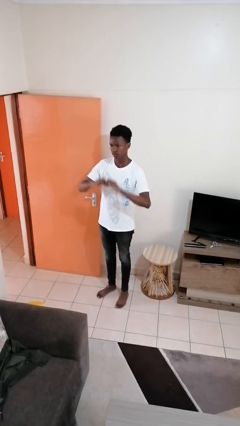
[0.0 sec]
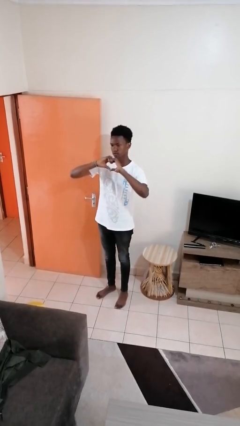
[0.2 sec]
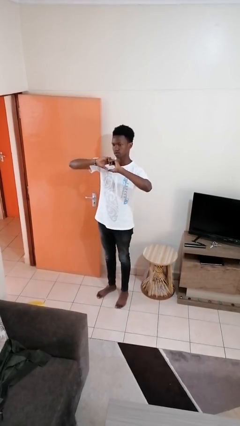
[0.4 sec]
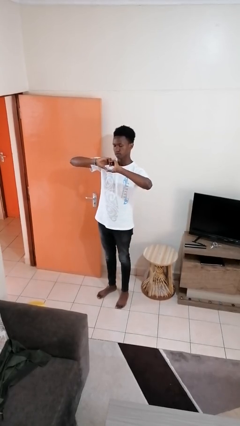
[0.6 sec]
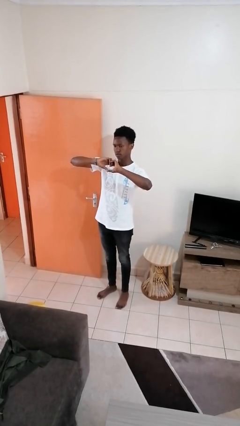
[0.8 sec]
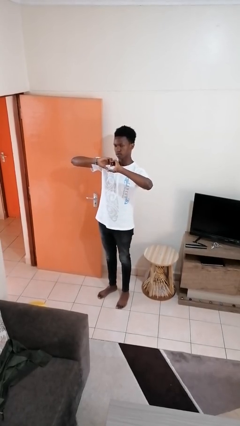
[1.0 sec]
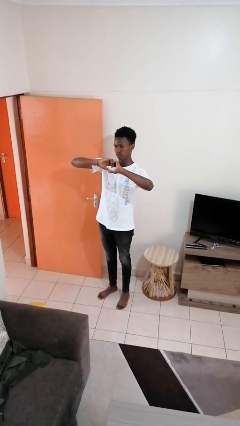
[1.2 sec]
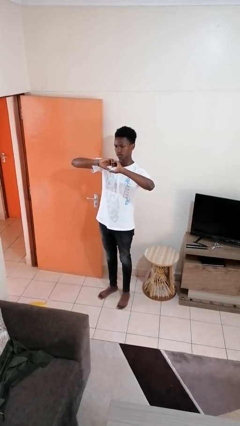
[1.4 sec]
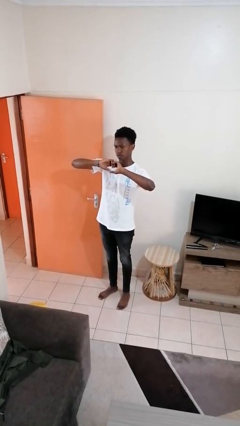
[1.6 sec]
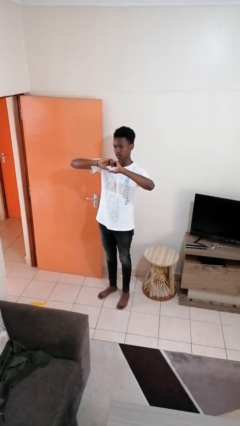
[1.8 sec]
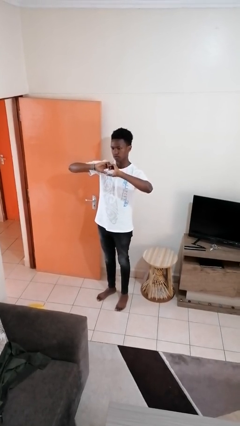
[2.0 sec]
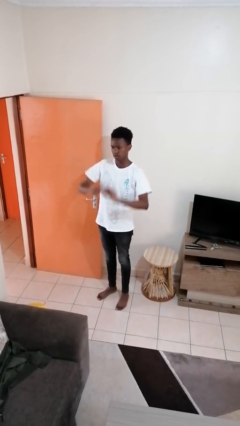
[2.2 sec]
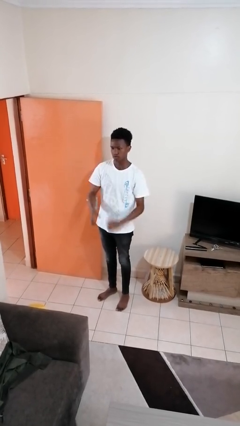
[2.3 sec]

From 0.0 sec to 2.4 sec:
person gestures heart

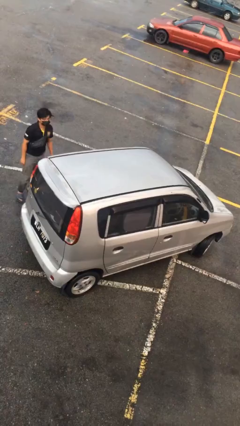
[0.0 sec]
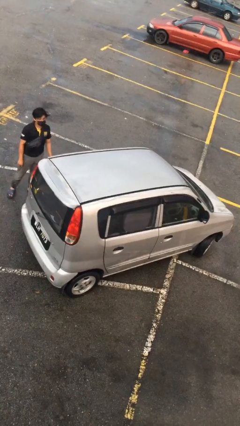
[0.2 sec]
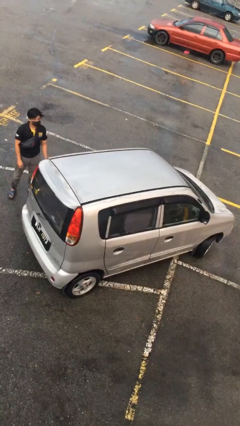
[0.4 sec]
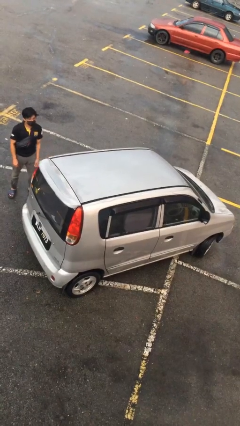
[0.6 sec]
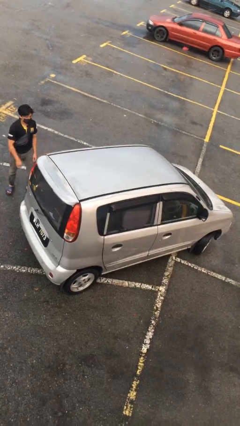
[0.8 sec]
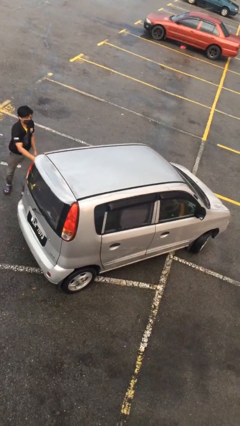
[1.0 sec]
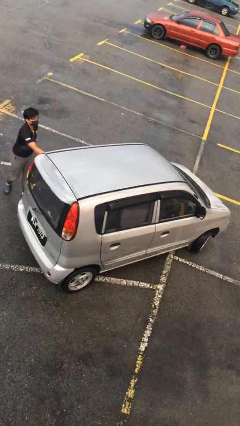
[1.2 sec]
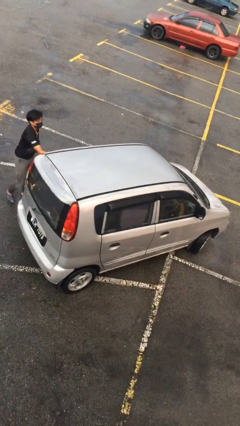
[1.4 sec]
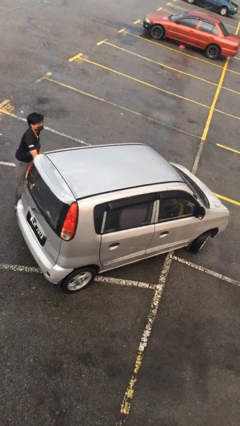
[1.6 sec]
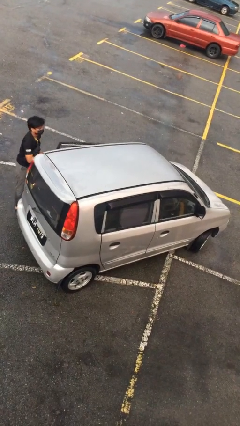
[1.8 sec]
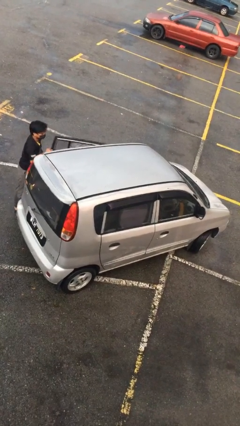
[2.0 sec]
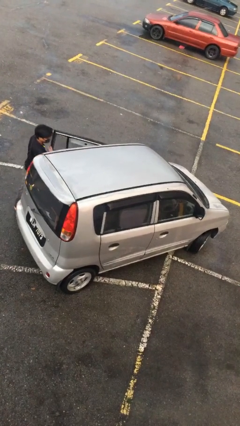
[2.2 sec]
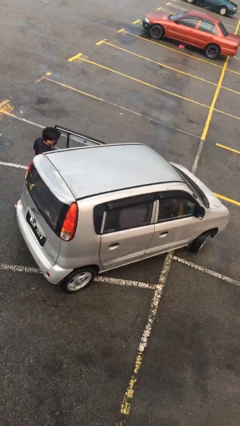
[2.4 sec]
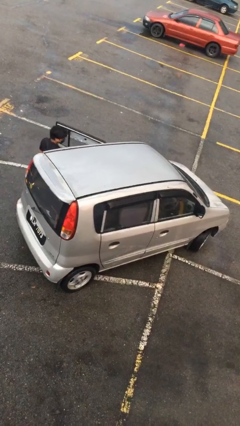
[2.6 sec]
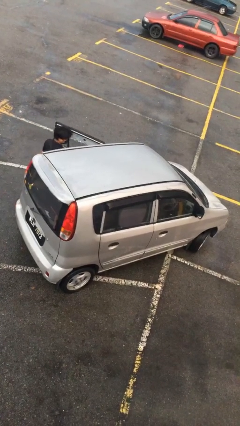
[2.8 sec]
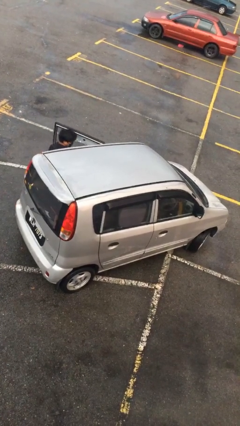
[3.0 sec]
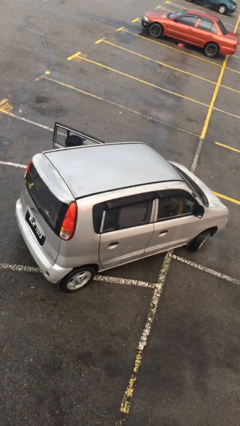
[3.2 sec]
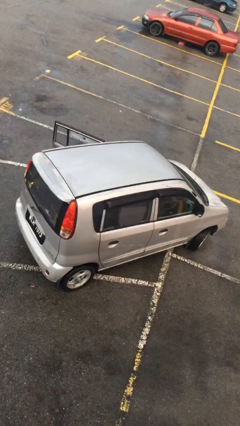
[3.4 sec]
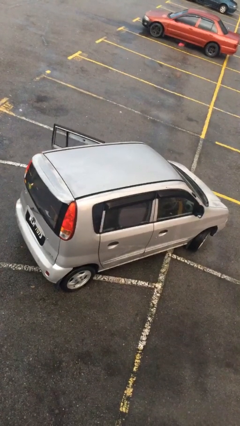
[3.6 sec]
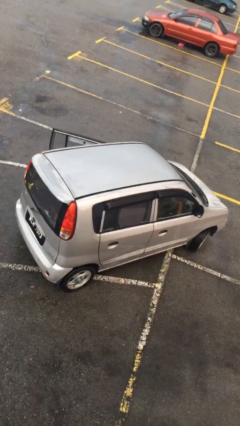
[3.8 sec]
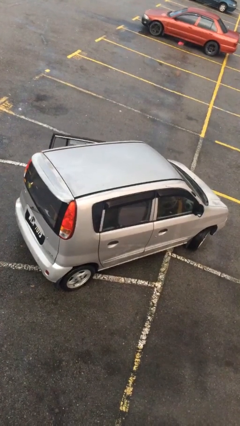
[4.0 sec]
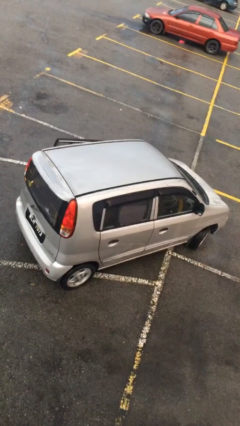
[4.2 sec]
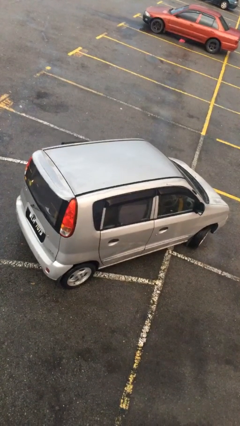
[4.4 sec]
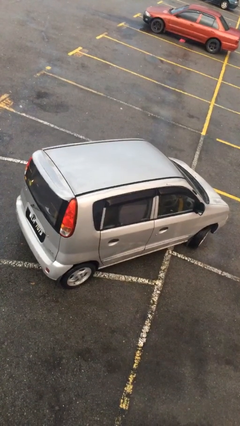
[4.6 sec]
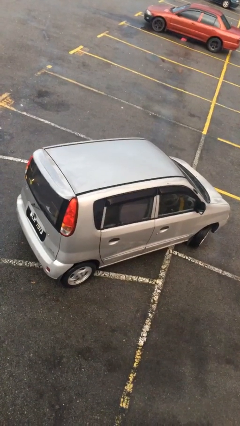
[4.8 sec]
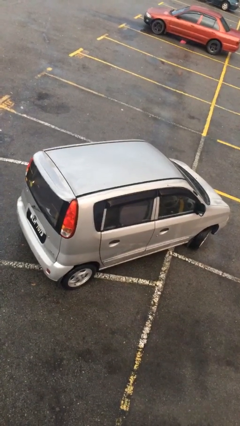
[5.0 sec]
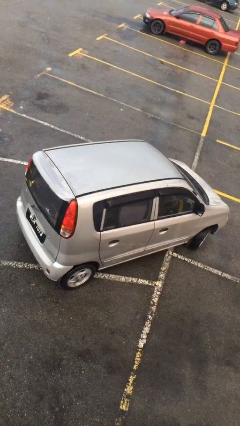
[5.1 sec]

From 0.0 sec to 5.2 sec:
car picks up person

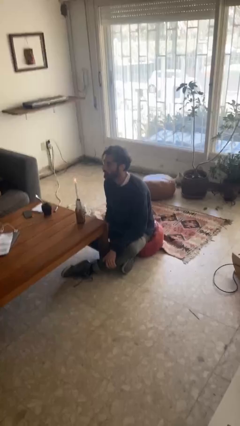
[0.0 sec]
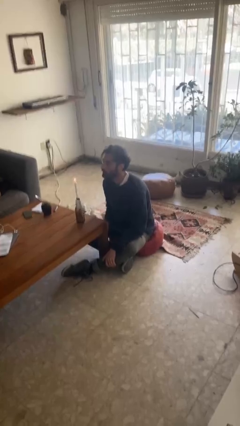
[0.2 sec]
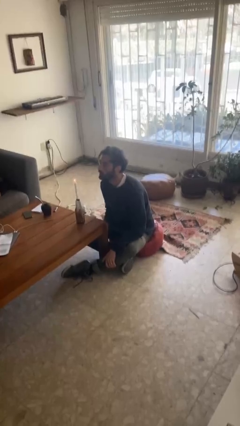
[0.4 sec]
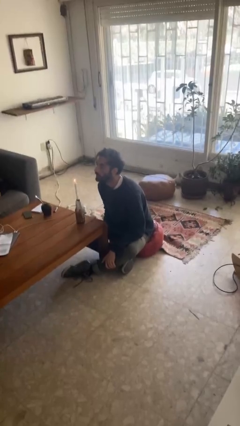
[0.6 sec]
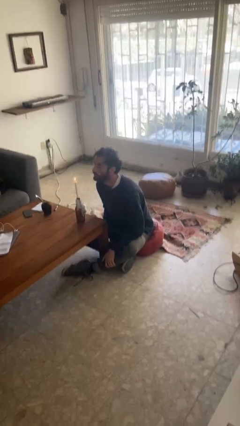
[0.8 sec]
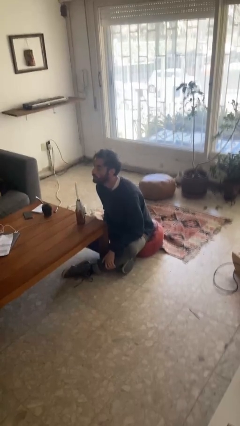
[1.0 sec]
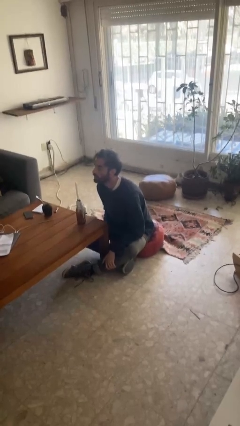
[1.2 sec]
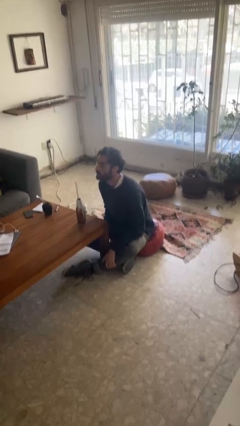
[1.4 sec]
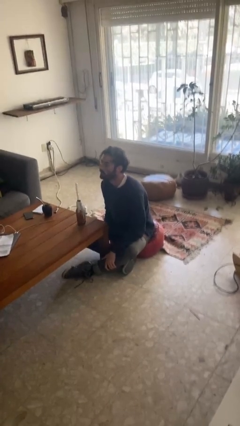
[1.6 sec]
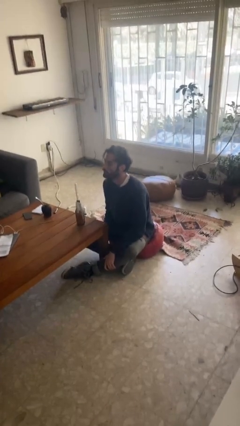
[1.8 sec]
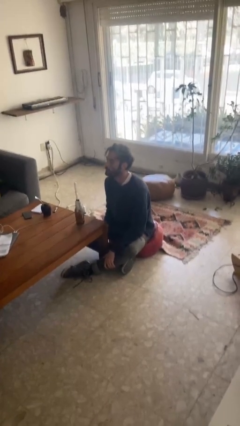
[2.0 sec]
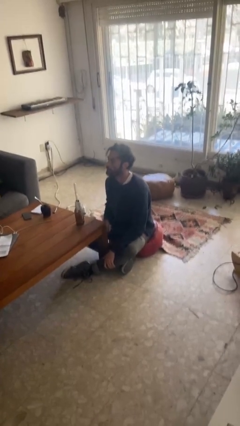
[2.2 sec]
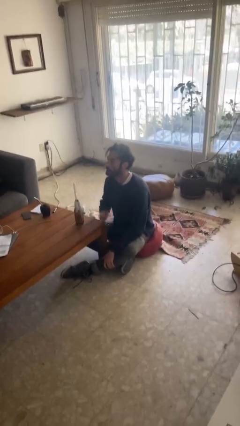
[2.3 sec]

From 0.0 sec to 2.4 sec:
person extinguishes candle

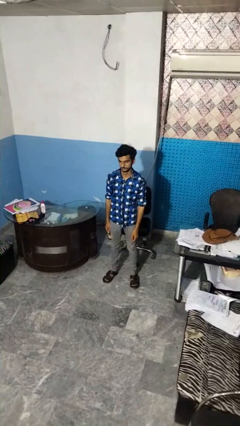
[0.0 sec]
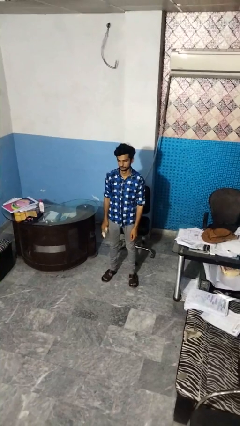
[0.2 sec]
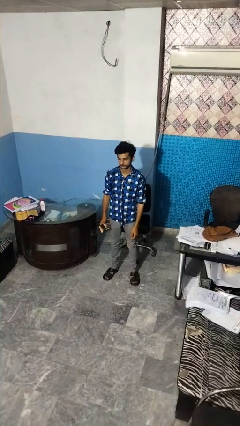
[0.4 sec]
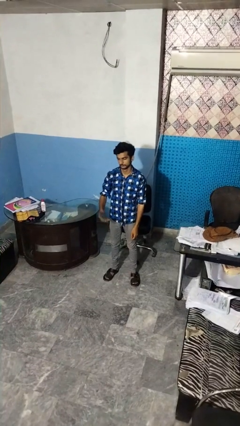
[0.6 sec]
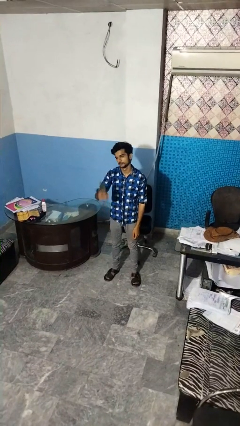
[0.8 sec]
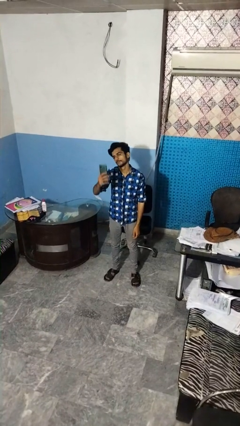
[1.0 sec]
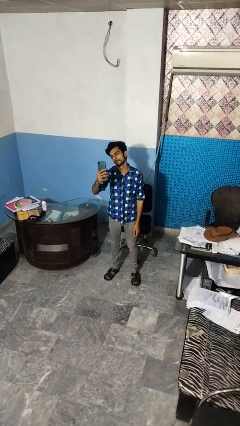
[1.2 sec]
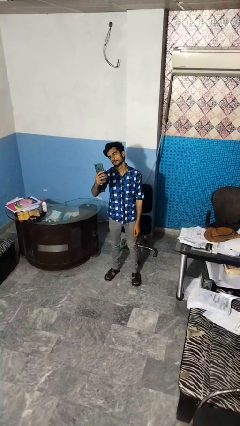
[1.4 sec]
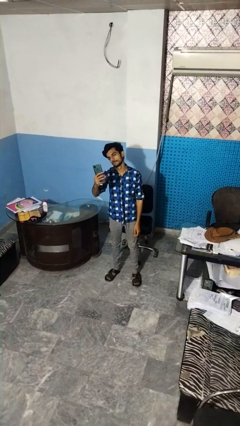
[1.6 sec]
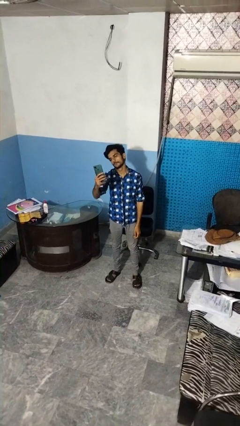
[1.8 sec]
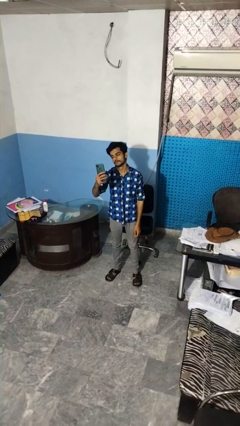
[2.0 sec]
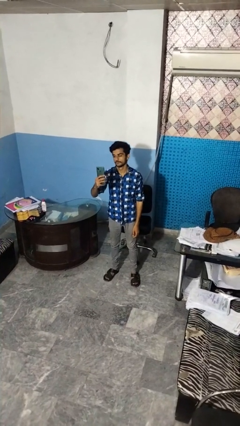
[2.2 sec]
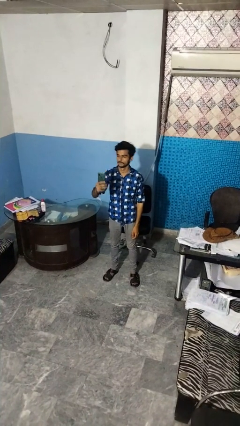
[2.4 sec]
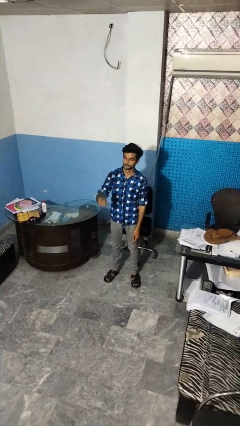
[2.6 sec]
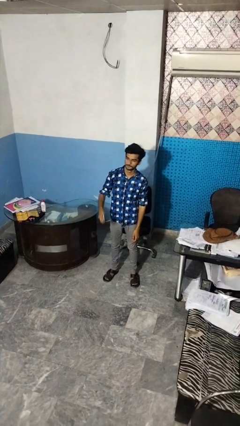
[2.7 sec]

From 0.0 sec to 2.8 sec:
person takes selfie

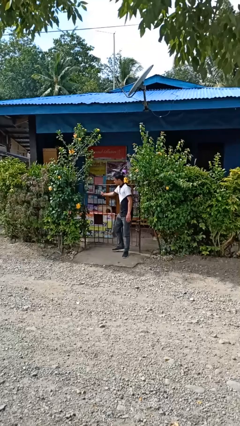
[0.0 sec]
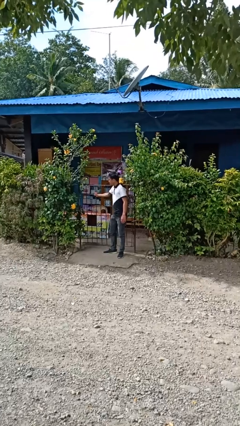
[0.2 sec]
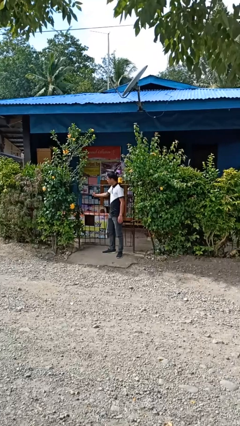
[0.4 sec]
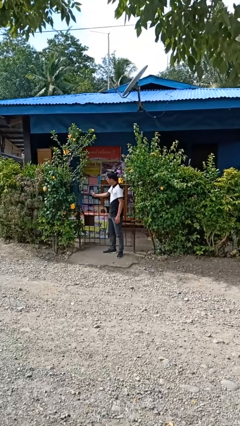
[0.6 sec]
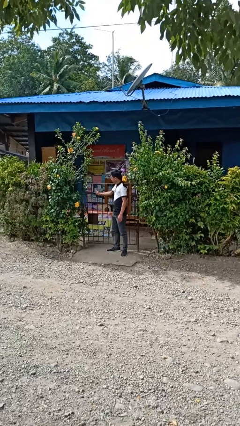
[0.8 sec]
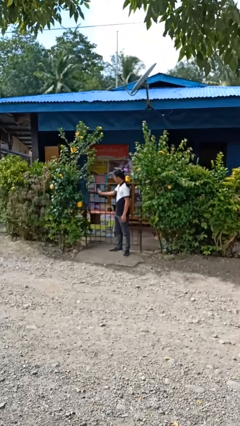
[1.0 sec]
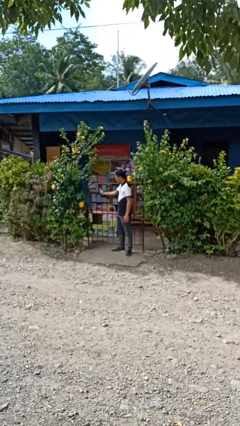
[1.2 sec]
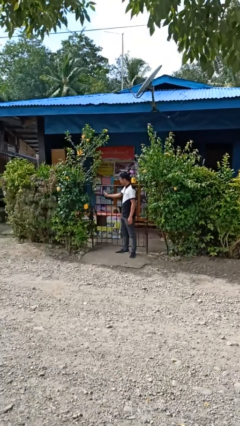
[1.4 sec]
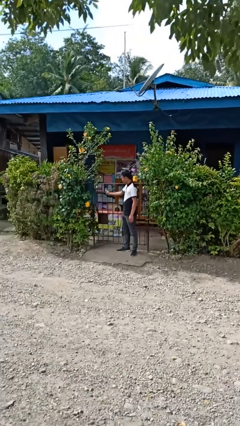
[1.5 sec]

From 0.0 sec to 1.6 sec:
person closes gate

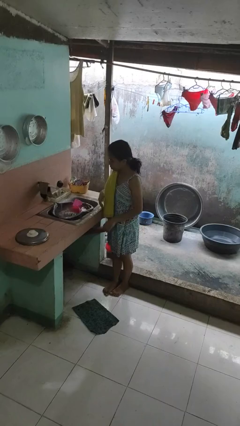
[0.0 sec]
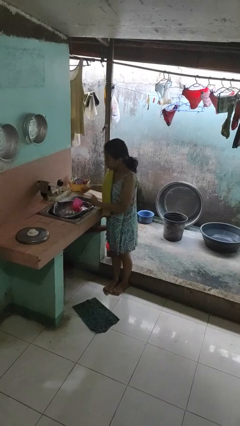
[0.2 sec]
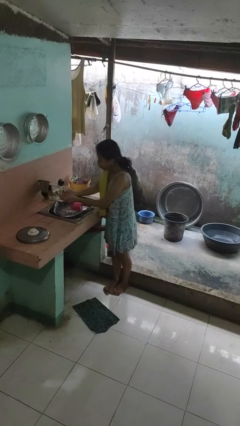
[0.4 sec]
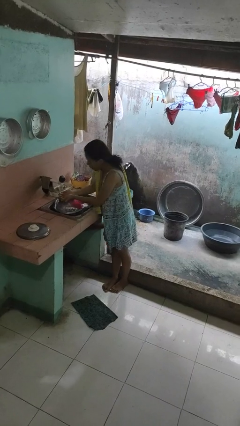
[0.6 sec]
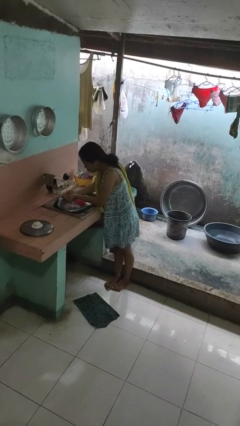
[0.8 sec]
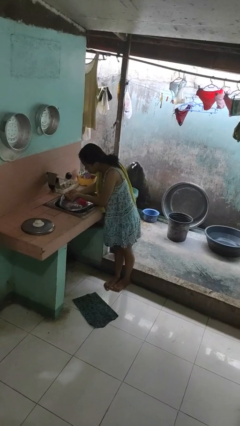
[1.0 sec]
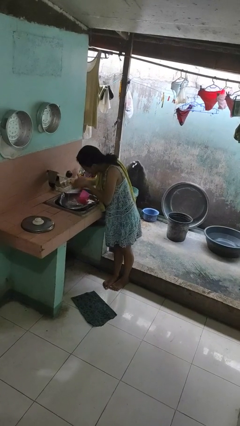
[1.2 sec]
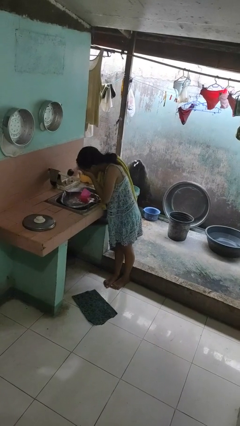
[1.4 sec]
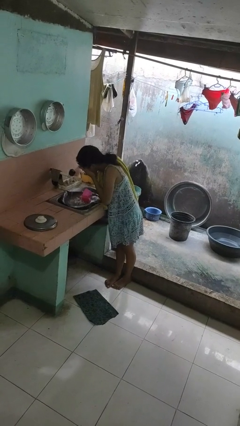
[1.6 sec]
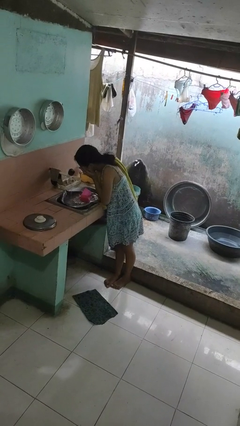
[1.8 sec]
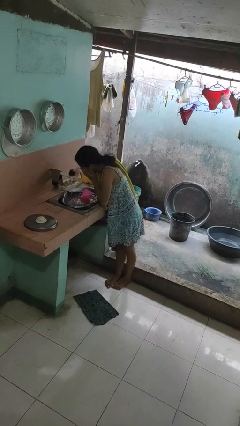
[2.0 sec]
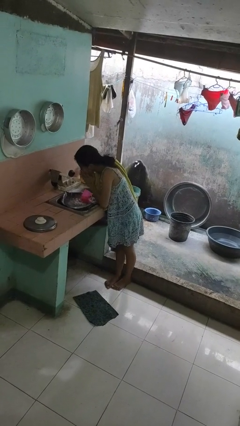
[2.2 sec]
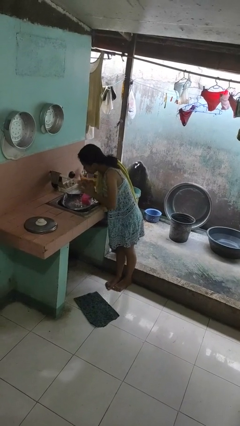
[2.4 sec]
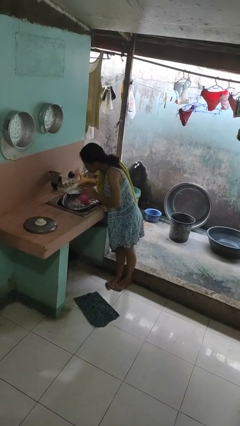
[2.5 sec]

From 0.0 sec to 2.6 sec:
person washes face
